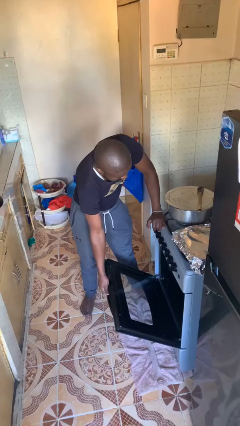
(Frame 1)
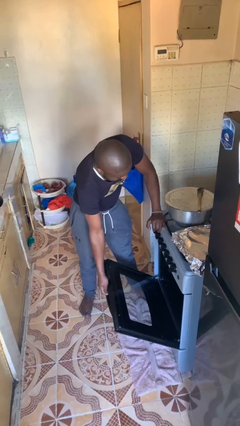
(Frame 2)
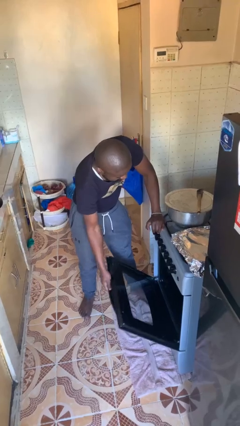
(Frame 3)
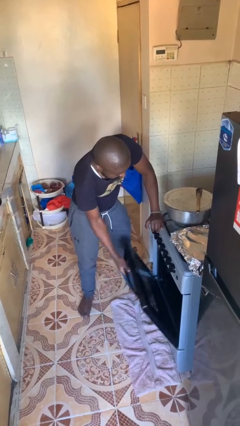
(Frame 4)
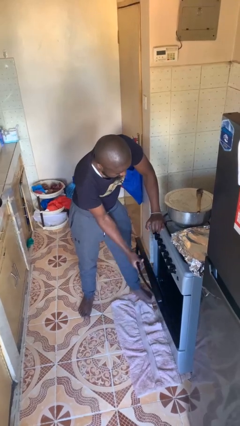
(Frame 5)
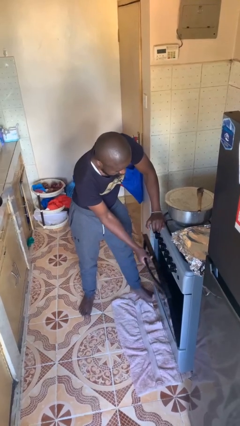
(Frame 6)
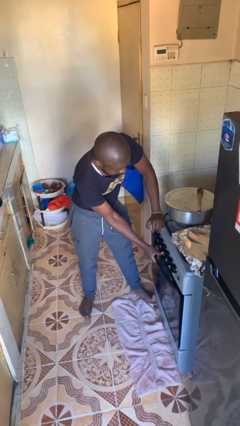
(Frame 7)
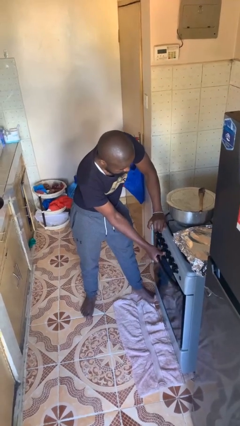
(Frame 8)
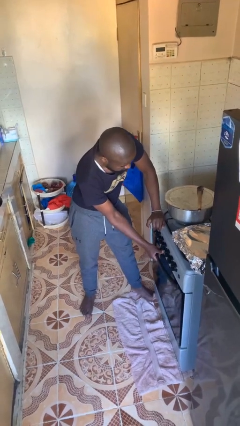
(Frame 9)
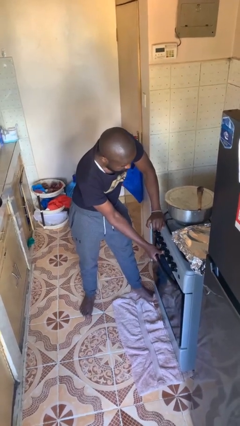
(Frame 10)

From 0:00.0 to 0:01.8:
person closes oven door

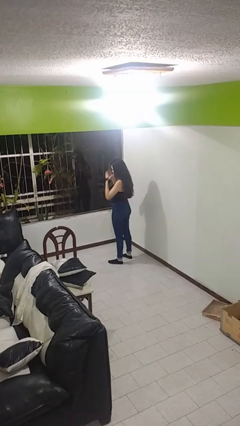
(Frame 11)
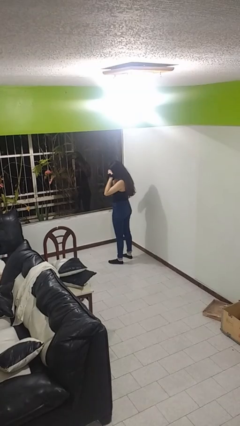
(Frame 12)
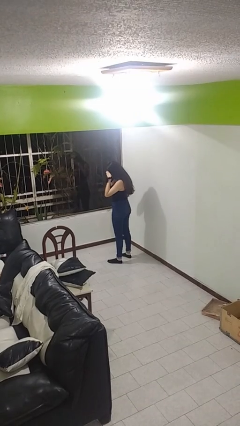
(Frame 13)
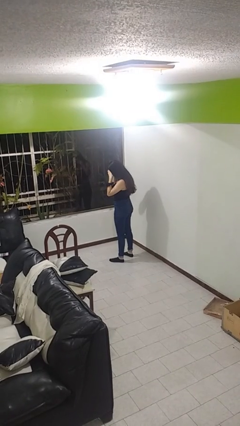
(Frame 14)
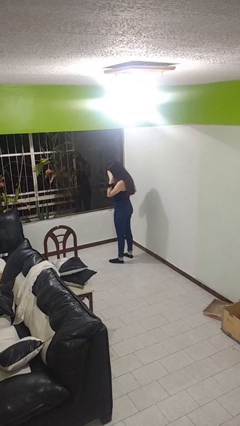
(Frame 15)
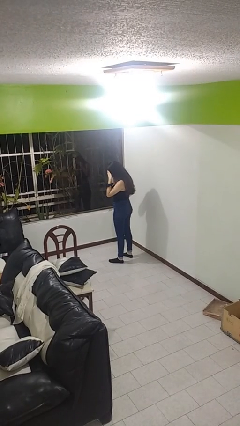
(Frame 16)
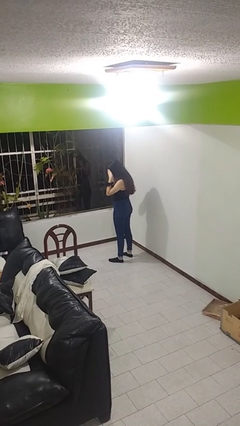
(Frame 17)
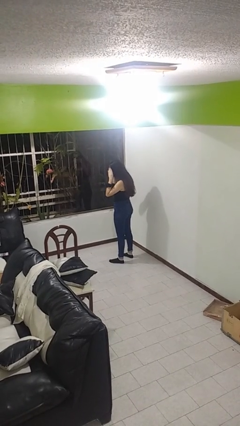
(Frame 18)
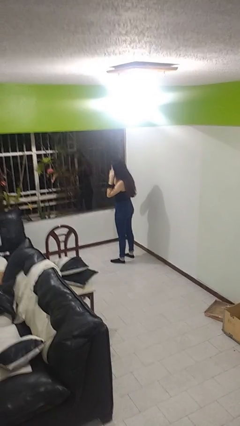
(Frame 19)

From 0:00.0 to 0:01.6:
person covers face with hands

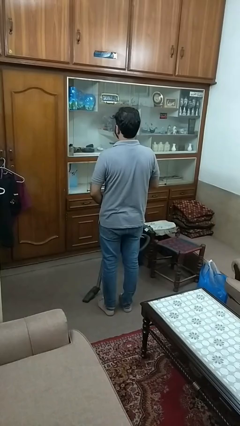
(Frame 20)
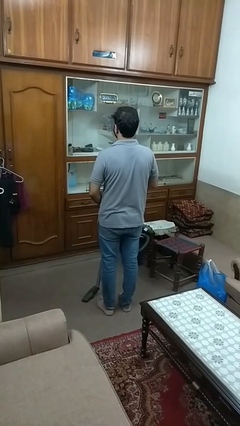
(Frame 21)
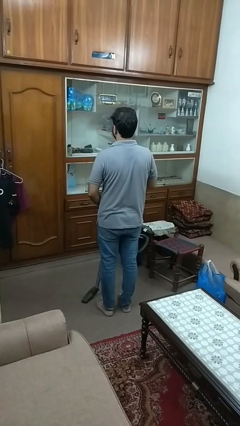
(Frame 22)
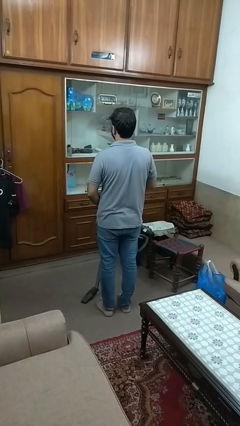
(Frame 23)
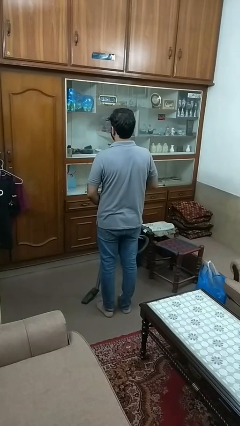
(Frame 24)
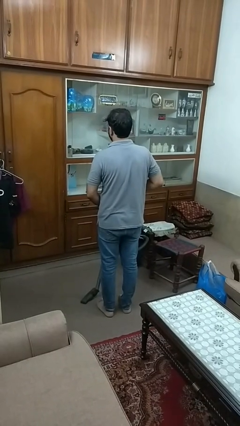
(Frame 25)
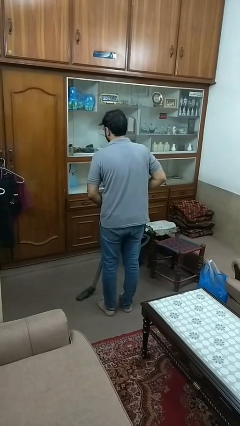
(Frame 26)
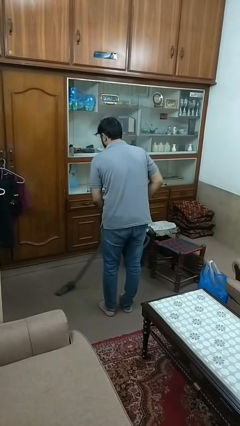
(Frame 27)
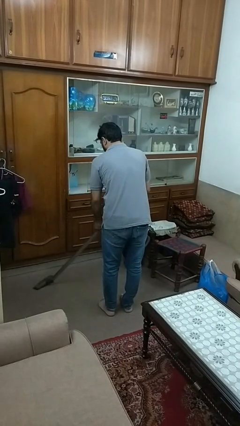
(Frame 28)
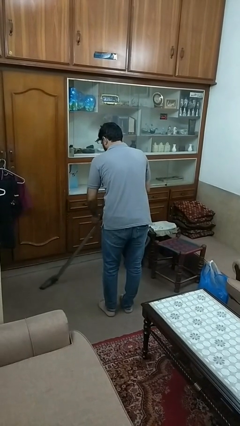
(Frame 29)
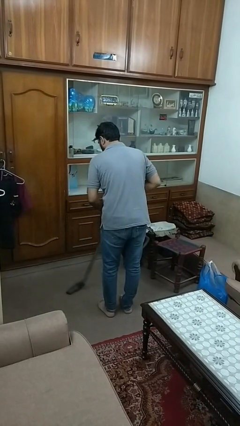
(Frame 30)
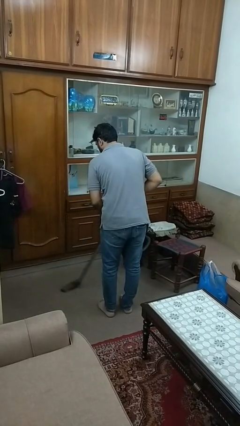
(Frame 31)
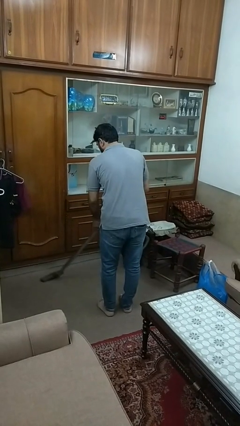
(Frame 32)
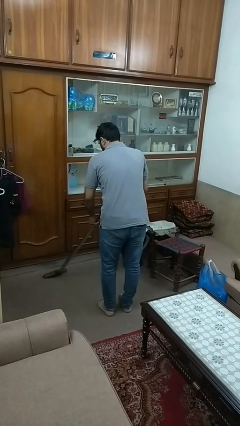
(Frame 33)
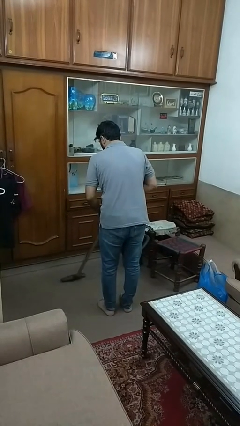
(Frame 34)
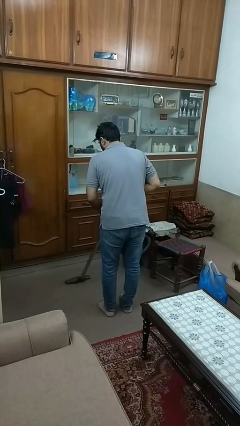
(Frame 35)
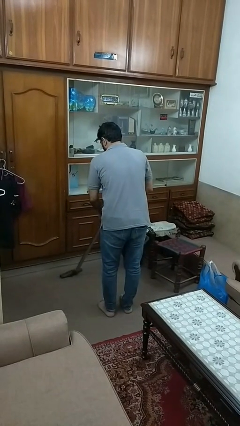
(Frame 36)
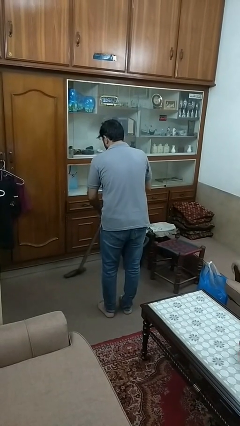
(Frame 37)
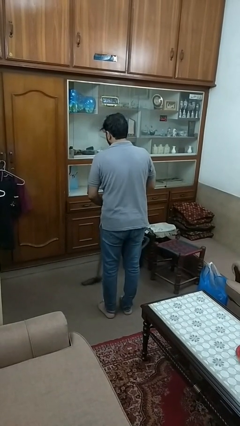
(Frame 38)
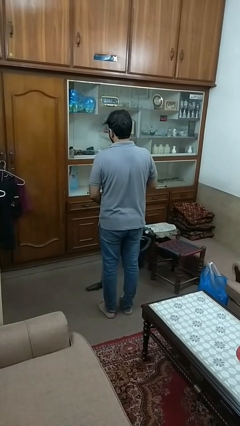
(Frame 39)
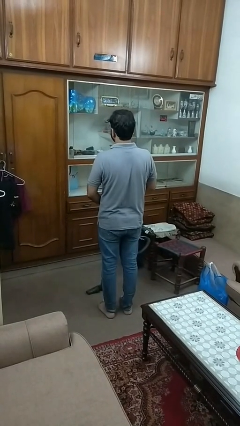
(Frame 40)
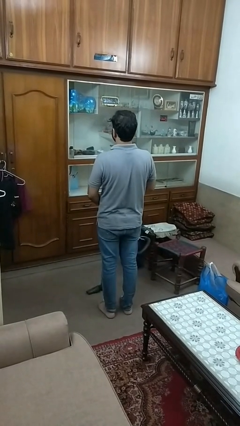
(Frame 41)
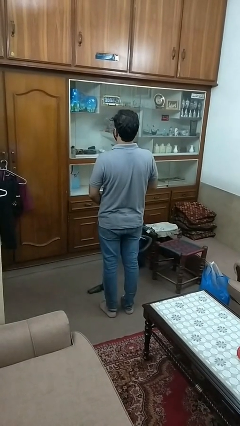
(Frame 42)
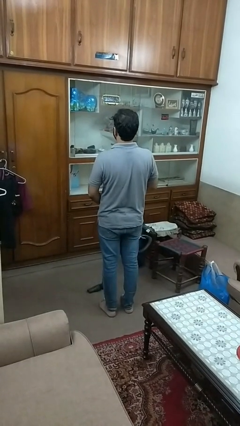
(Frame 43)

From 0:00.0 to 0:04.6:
person vacuums carpet

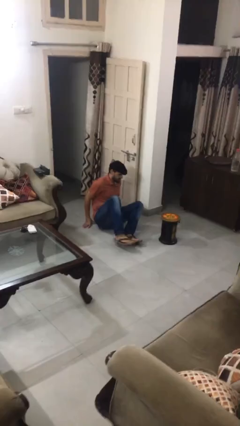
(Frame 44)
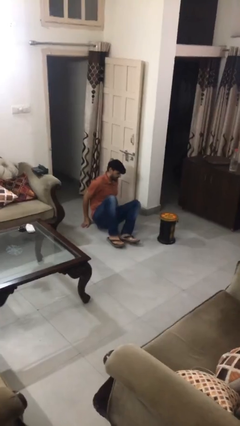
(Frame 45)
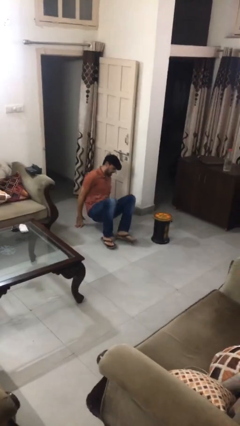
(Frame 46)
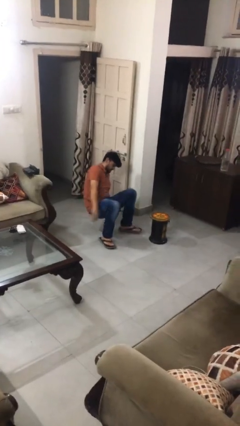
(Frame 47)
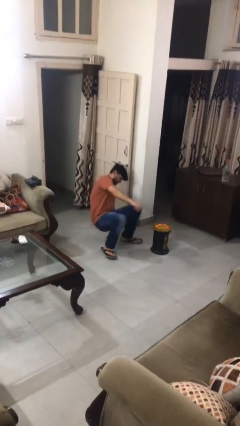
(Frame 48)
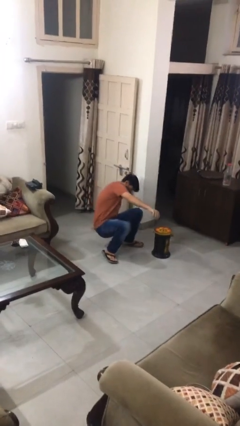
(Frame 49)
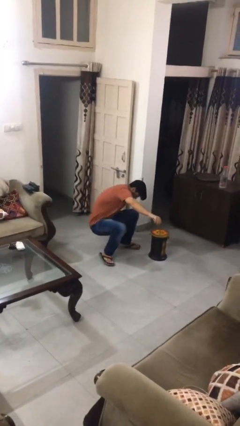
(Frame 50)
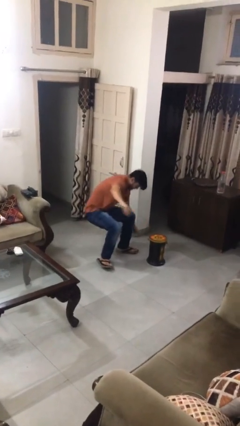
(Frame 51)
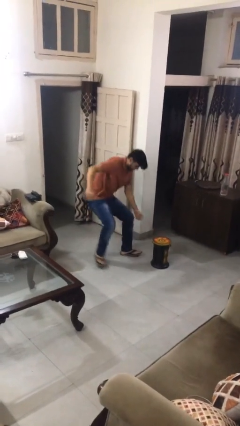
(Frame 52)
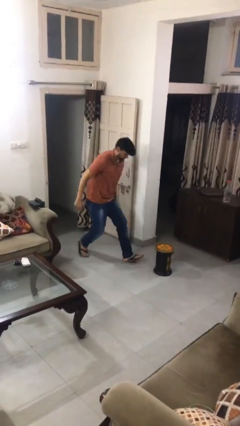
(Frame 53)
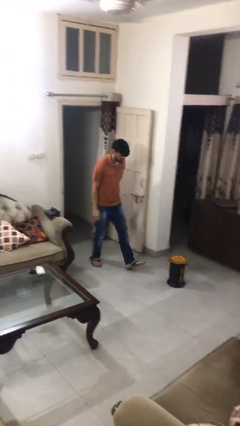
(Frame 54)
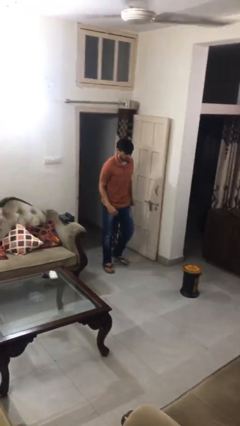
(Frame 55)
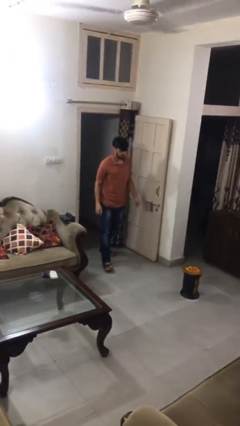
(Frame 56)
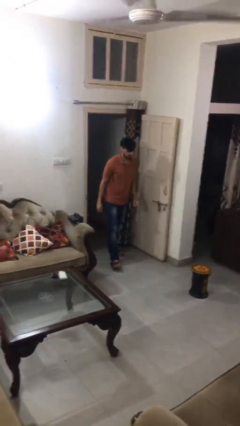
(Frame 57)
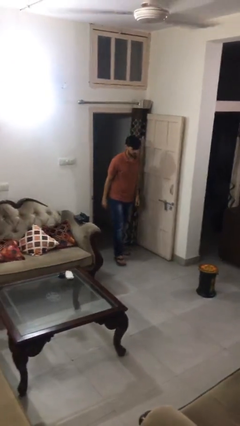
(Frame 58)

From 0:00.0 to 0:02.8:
person stands up from floor

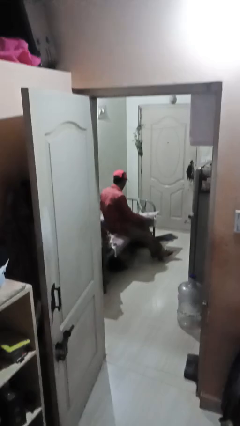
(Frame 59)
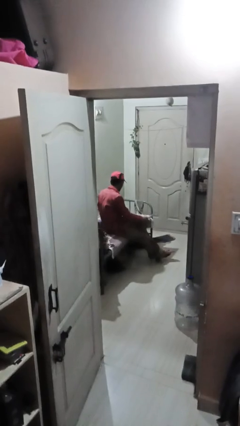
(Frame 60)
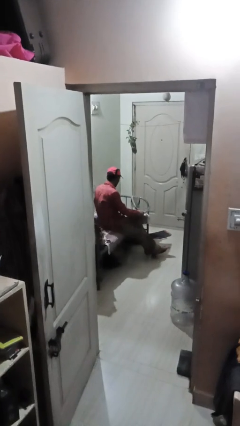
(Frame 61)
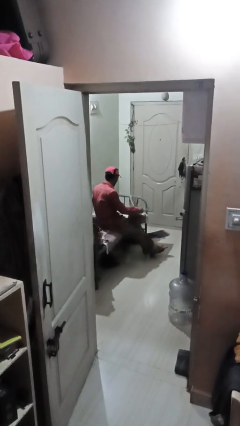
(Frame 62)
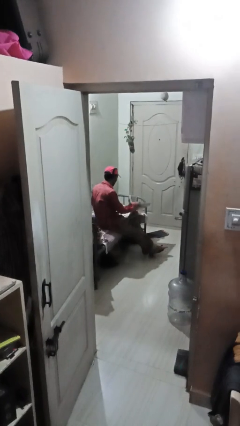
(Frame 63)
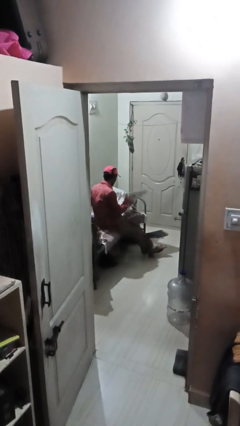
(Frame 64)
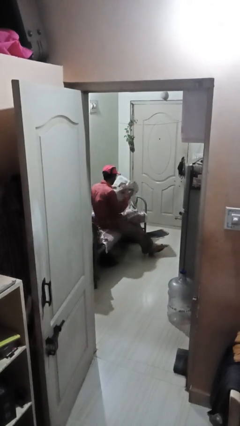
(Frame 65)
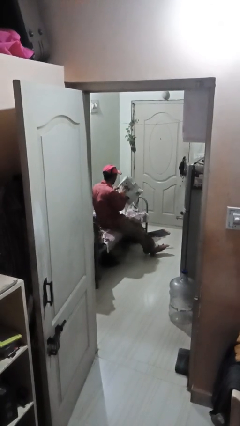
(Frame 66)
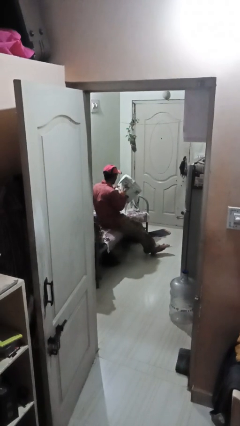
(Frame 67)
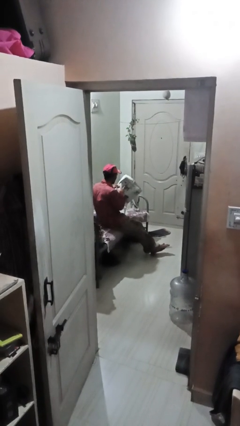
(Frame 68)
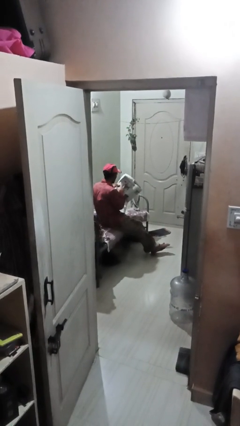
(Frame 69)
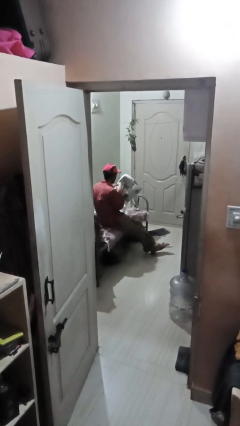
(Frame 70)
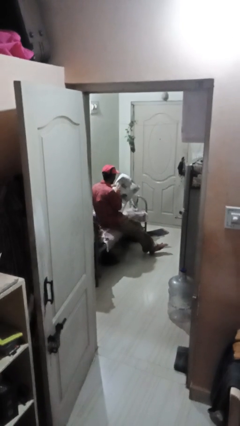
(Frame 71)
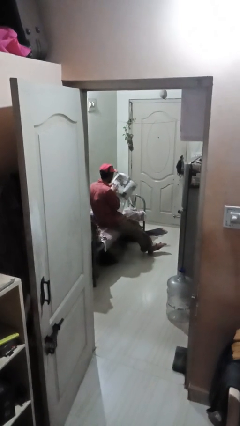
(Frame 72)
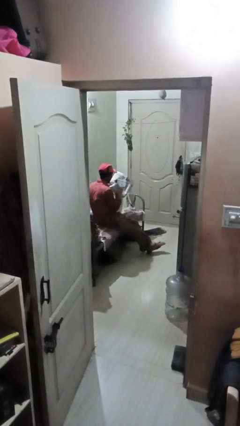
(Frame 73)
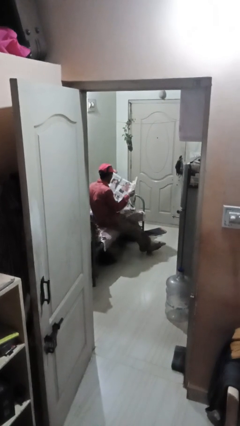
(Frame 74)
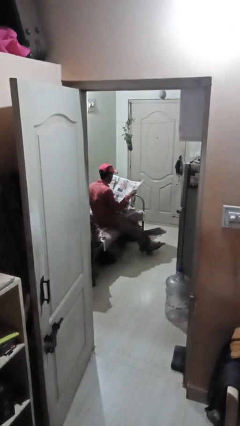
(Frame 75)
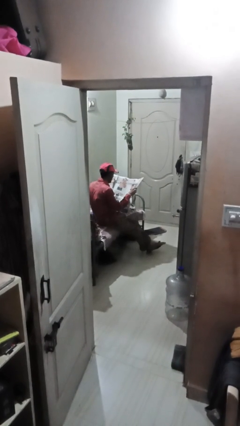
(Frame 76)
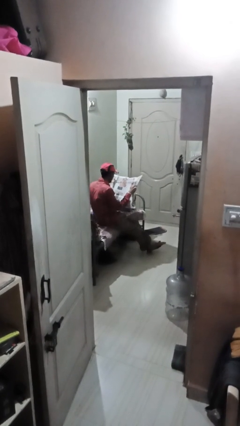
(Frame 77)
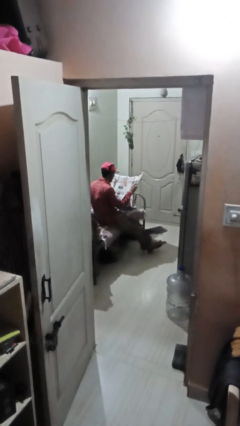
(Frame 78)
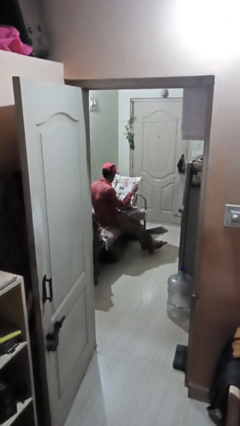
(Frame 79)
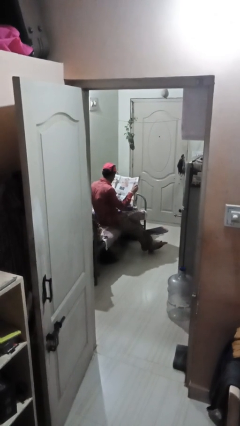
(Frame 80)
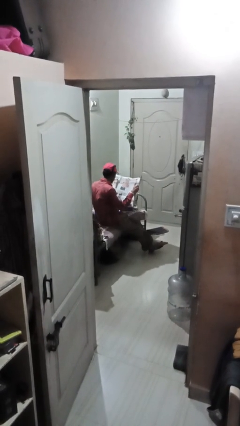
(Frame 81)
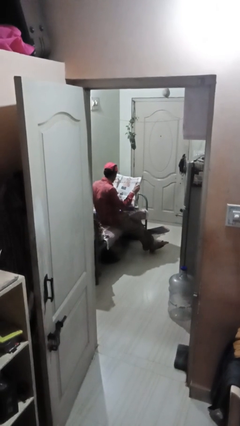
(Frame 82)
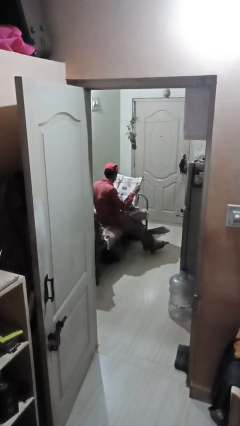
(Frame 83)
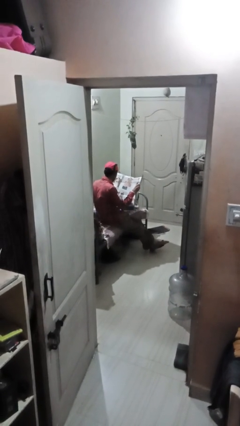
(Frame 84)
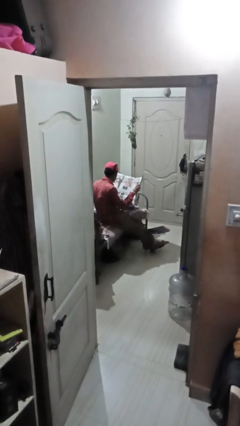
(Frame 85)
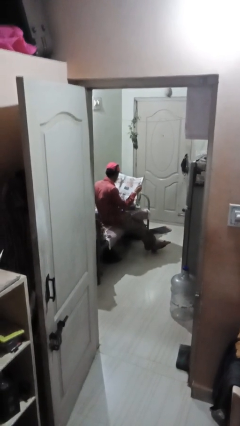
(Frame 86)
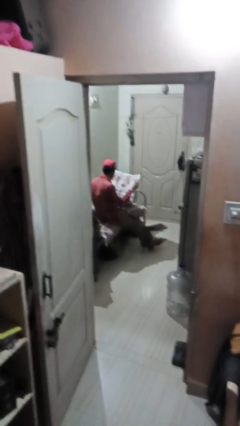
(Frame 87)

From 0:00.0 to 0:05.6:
person reads newspaper

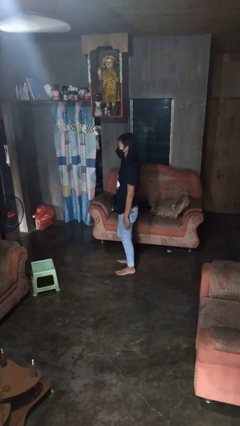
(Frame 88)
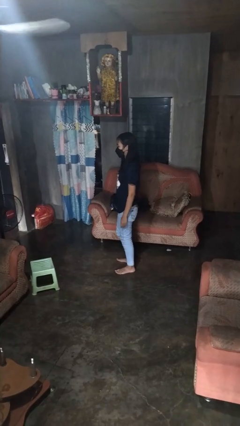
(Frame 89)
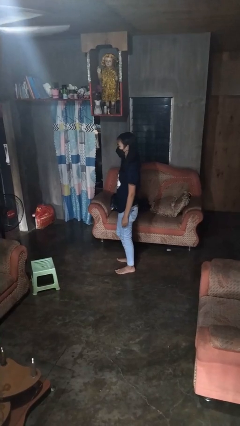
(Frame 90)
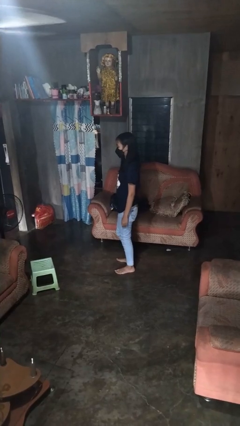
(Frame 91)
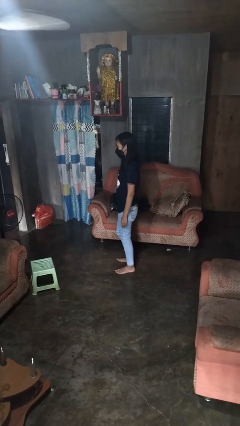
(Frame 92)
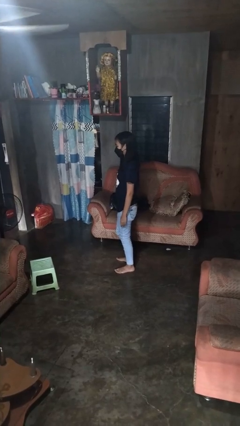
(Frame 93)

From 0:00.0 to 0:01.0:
person puts hands in back pockets
